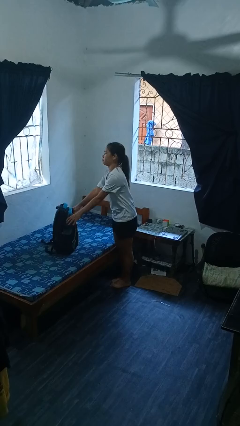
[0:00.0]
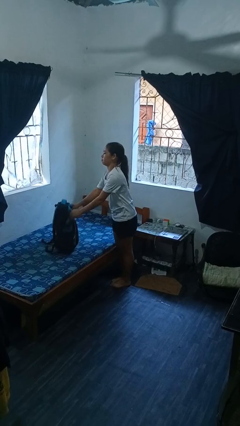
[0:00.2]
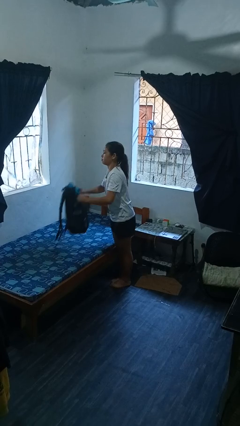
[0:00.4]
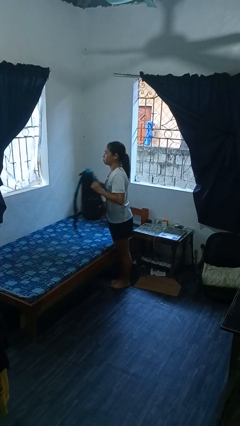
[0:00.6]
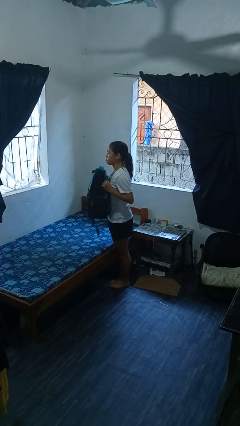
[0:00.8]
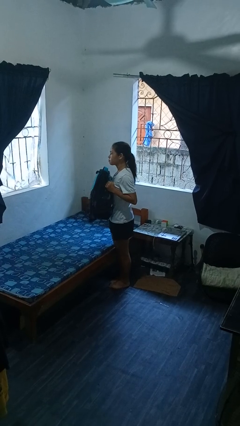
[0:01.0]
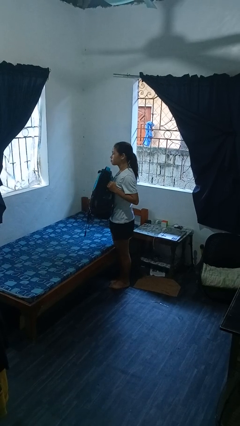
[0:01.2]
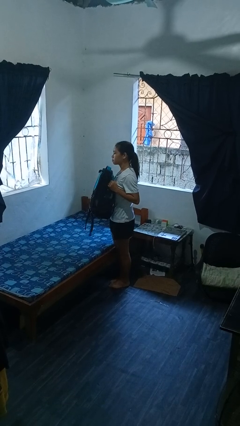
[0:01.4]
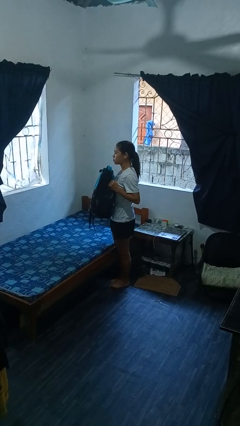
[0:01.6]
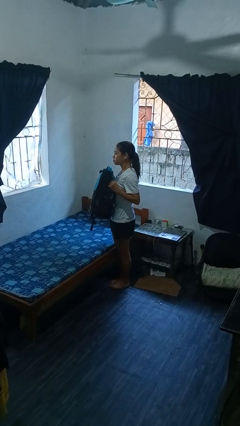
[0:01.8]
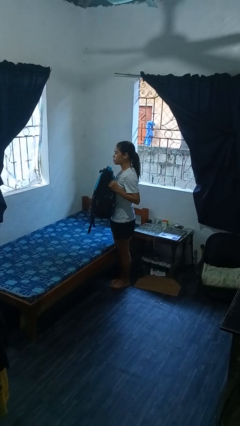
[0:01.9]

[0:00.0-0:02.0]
person picks up object from bed

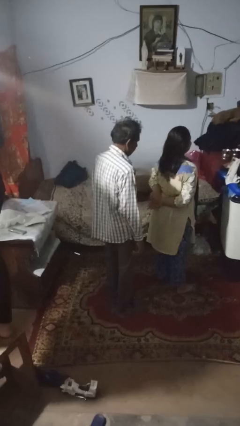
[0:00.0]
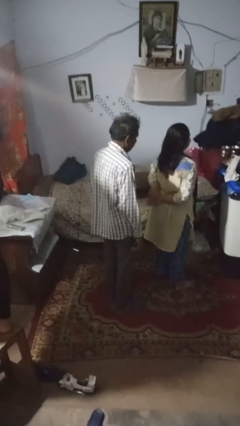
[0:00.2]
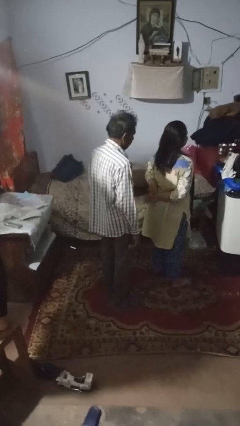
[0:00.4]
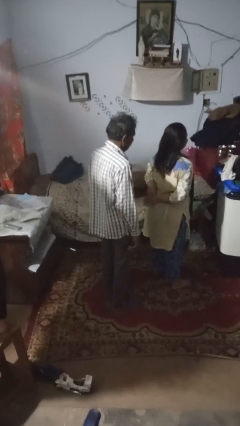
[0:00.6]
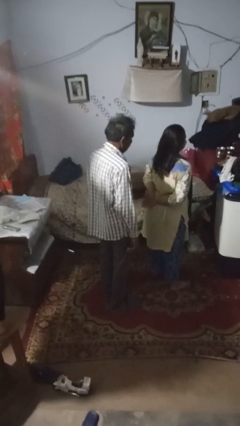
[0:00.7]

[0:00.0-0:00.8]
person braids hair of person

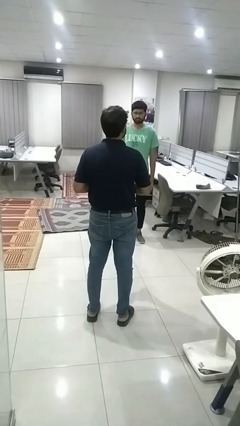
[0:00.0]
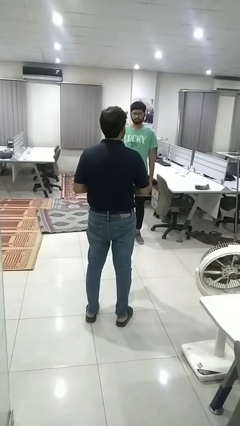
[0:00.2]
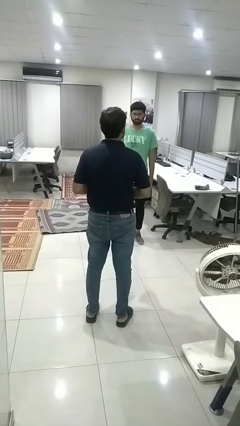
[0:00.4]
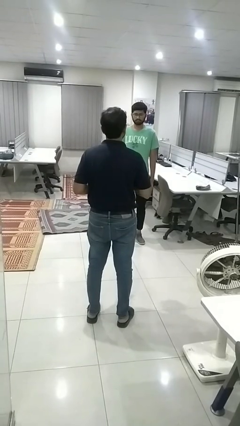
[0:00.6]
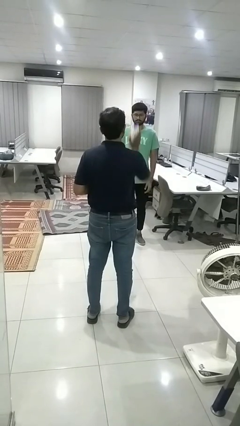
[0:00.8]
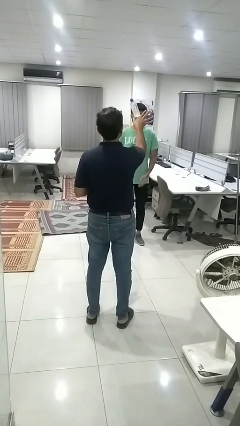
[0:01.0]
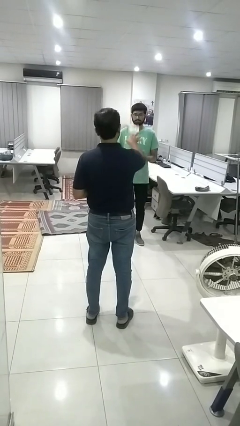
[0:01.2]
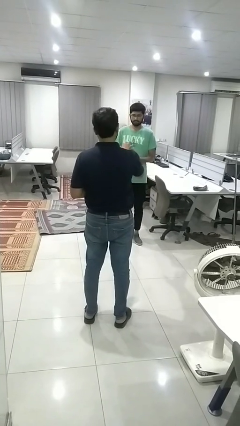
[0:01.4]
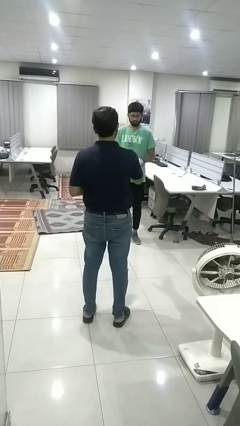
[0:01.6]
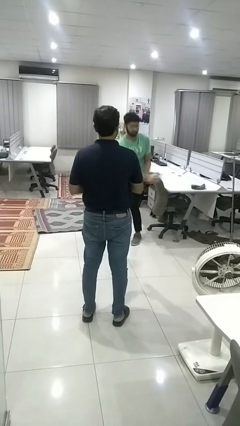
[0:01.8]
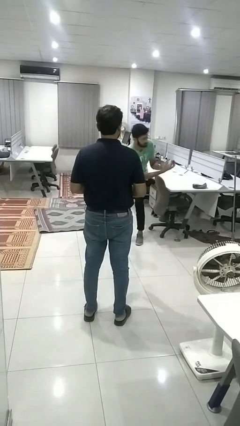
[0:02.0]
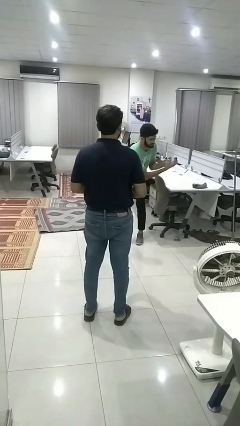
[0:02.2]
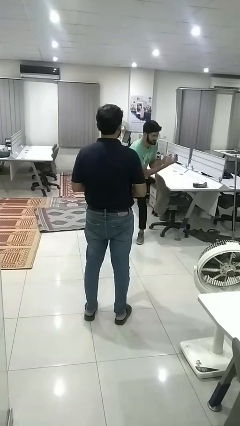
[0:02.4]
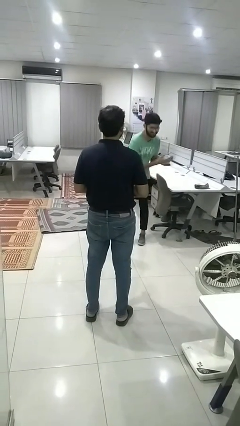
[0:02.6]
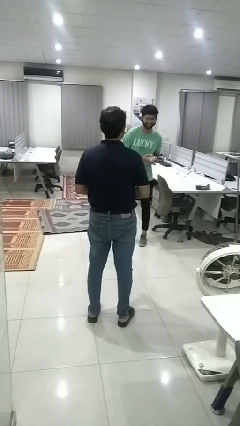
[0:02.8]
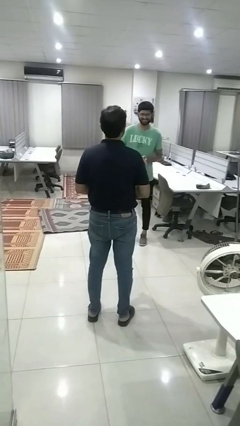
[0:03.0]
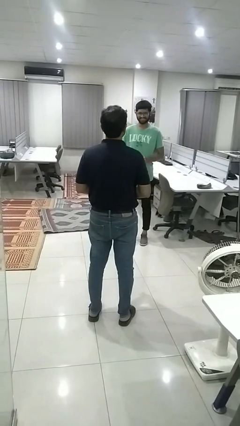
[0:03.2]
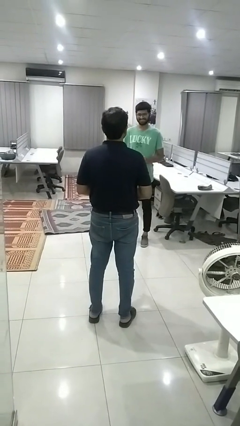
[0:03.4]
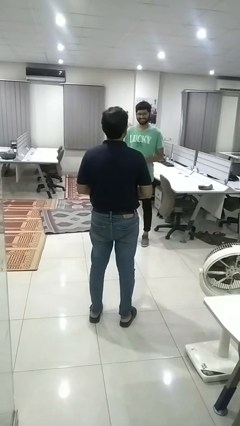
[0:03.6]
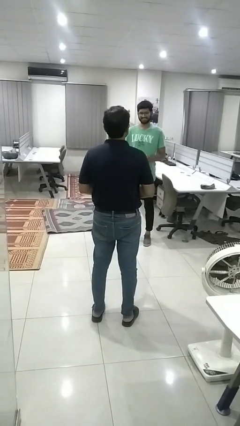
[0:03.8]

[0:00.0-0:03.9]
person throws object to person

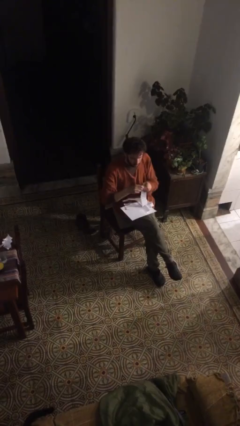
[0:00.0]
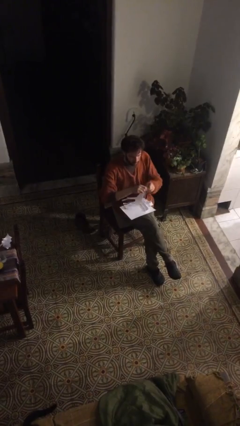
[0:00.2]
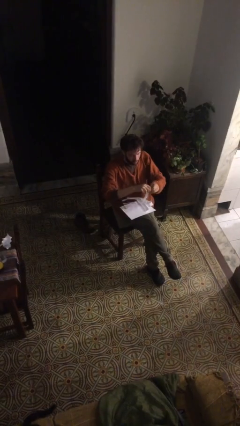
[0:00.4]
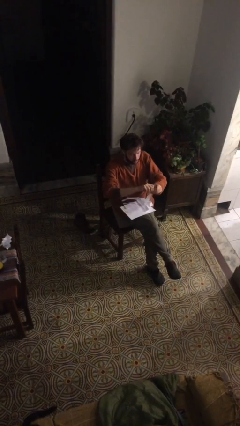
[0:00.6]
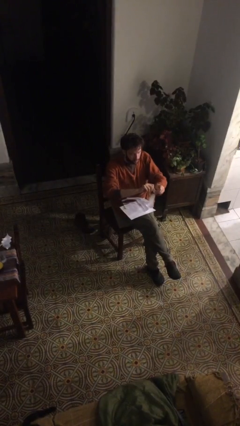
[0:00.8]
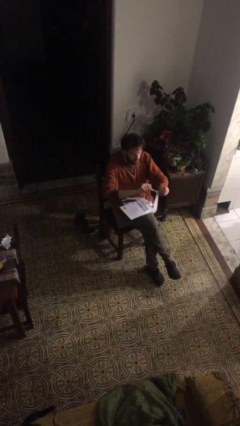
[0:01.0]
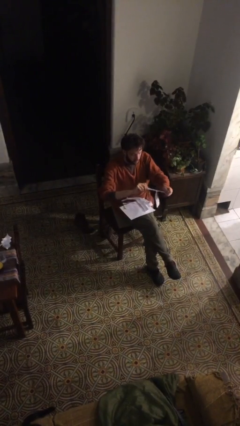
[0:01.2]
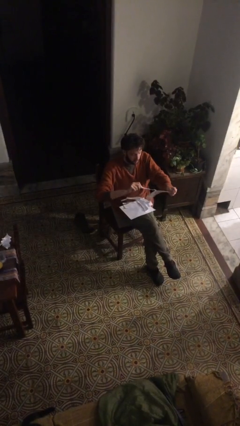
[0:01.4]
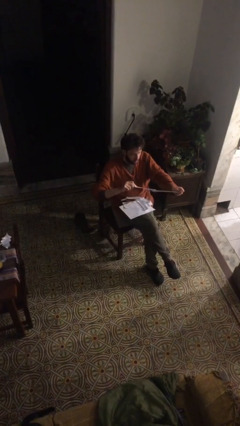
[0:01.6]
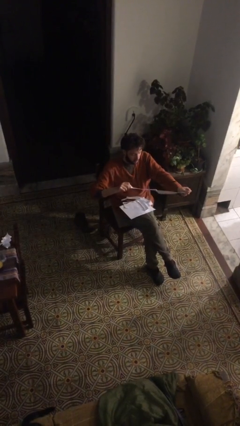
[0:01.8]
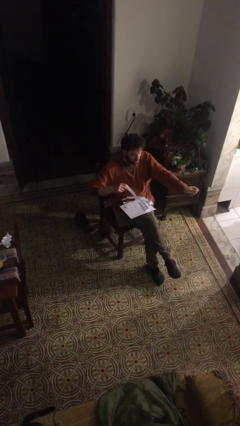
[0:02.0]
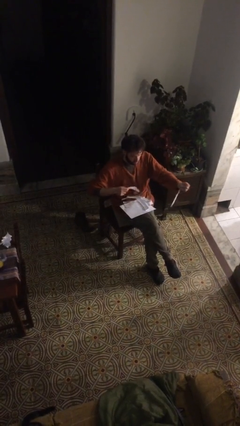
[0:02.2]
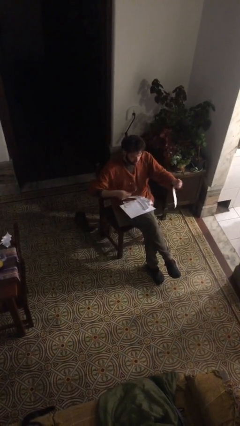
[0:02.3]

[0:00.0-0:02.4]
person tears paper

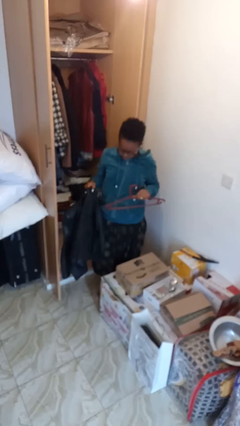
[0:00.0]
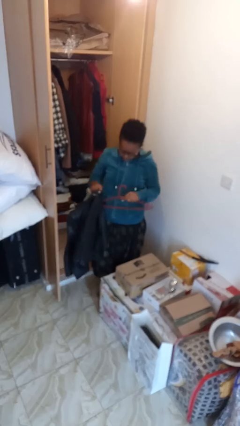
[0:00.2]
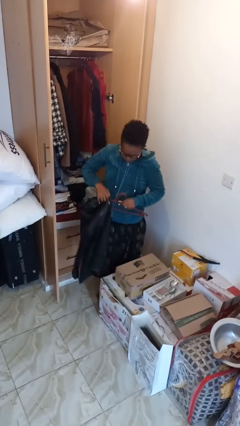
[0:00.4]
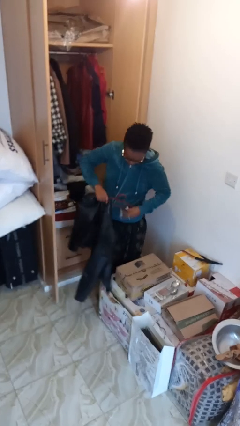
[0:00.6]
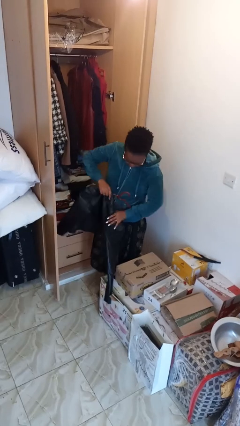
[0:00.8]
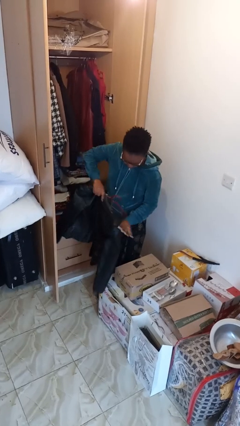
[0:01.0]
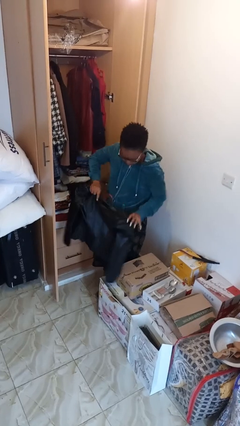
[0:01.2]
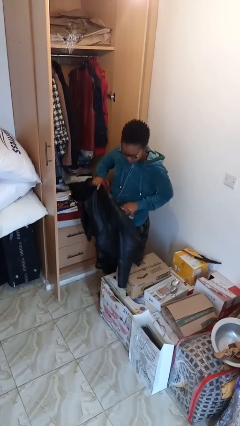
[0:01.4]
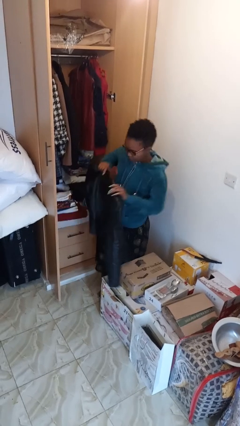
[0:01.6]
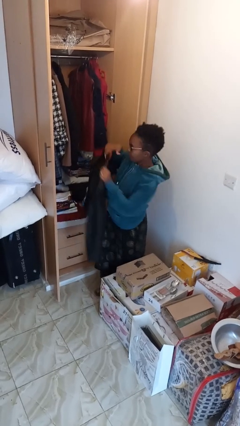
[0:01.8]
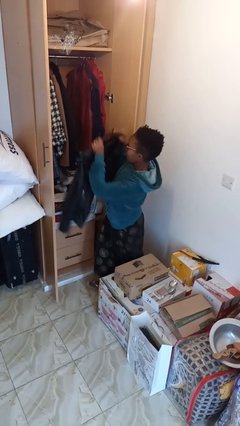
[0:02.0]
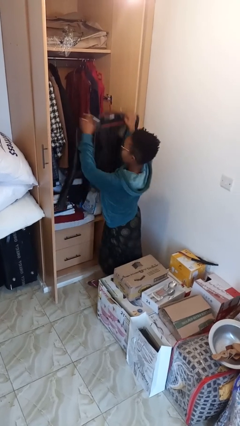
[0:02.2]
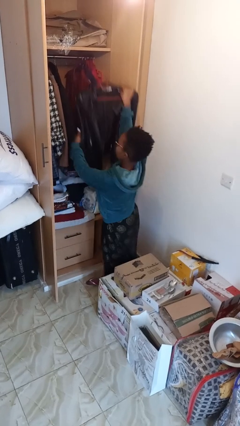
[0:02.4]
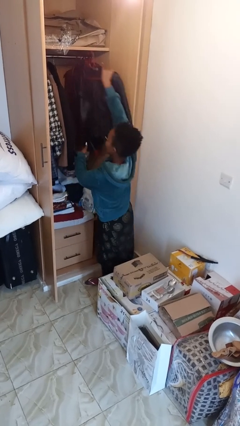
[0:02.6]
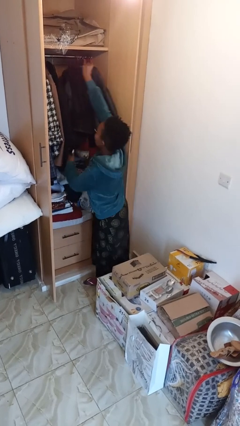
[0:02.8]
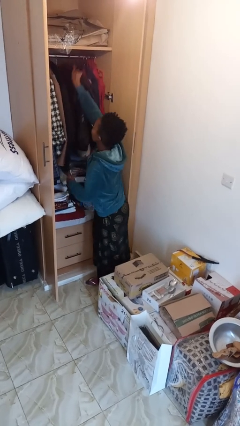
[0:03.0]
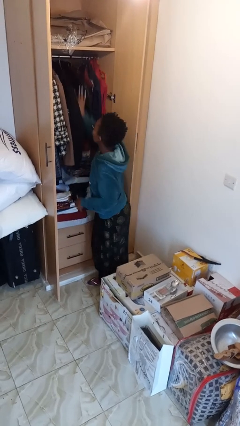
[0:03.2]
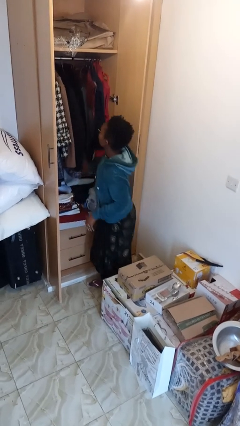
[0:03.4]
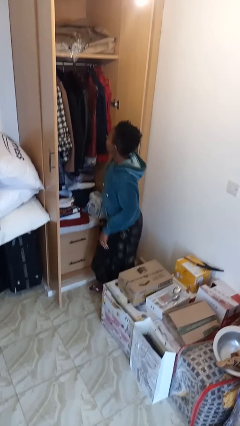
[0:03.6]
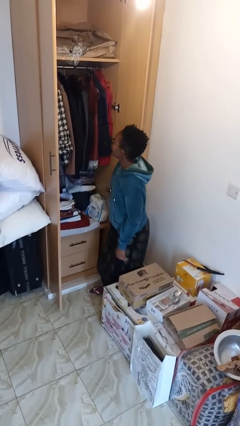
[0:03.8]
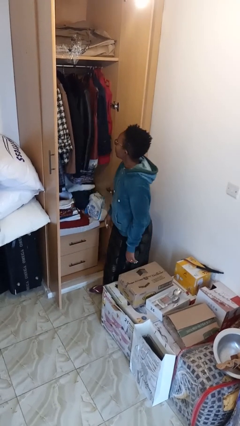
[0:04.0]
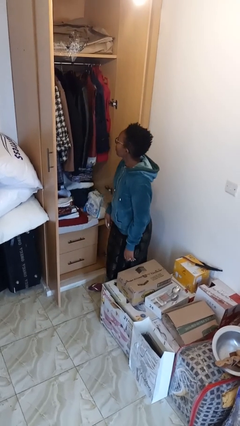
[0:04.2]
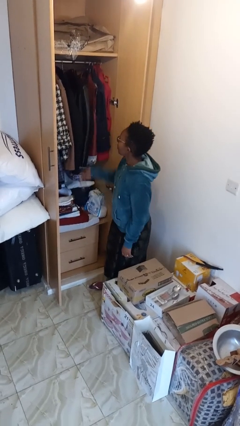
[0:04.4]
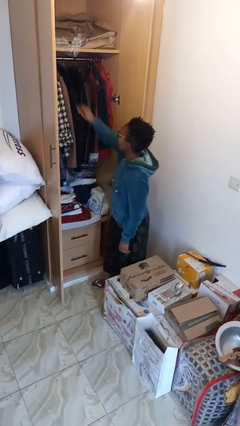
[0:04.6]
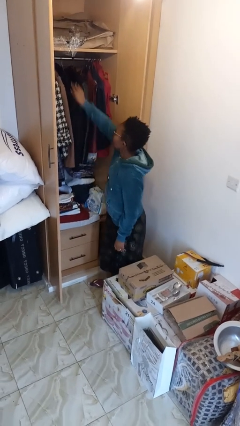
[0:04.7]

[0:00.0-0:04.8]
person puts clothes into closet

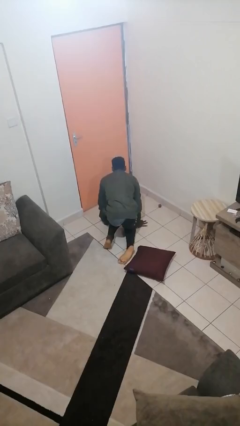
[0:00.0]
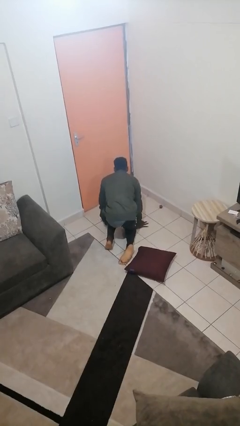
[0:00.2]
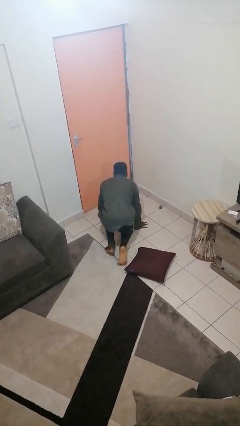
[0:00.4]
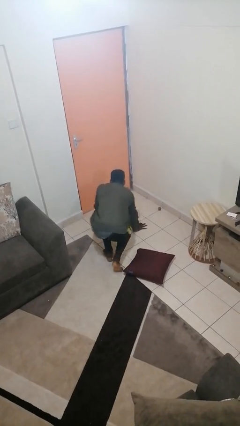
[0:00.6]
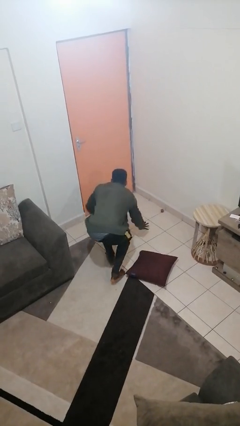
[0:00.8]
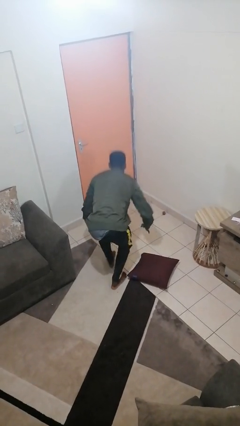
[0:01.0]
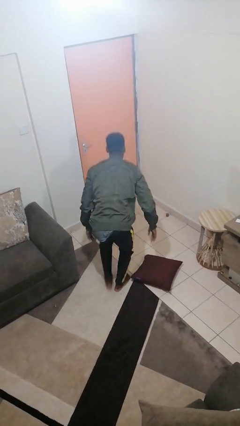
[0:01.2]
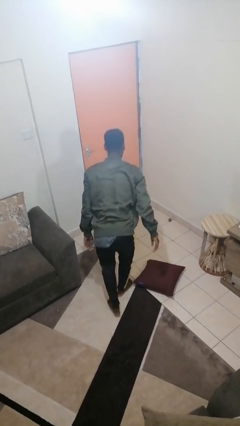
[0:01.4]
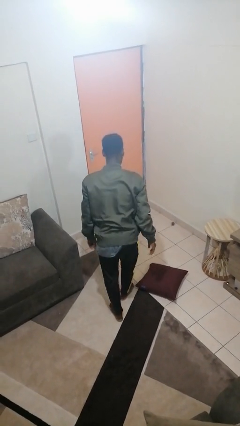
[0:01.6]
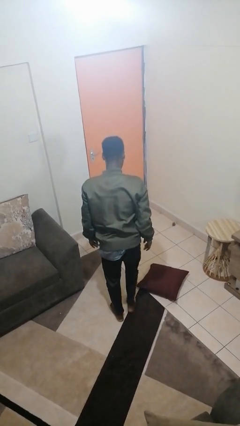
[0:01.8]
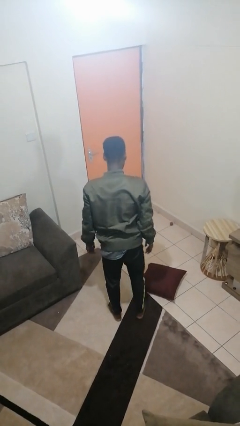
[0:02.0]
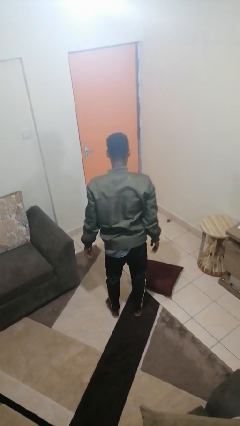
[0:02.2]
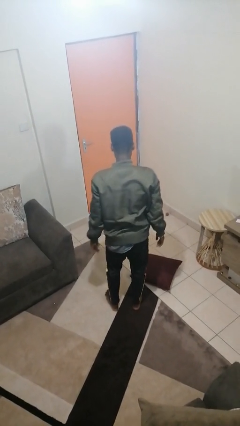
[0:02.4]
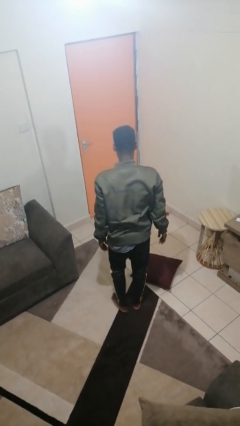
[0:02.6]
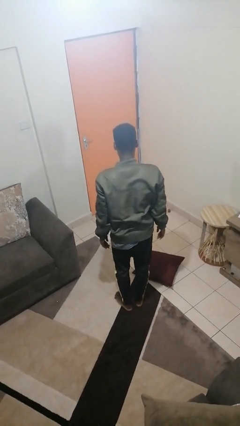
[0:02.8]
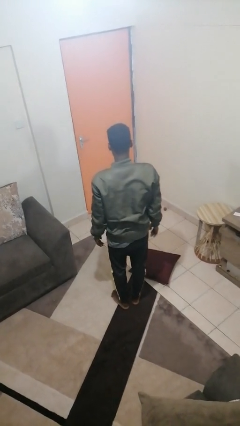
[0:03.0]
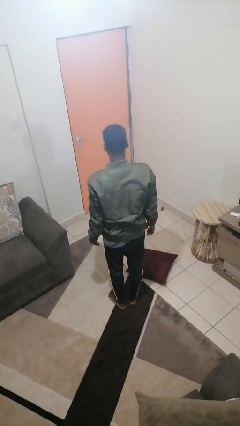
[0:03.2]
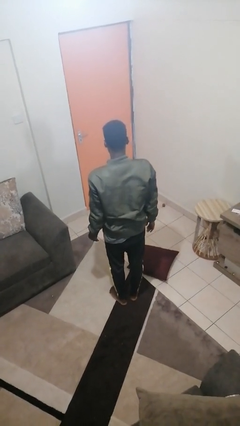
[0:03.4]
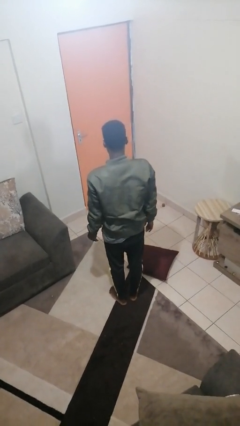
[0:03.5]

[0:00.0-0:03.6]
person stands up from floor
